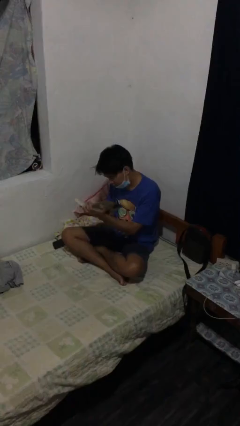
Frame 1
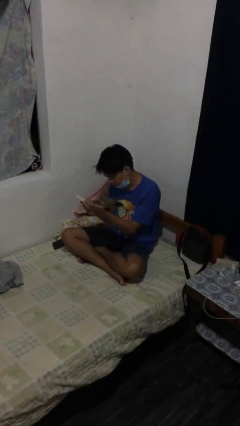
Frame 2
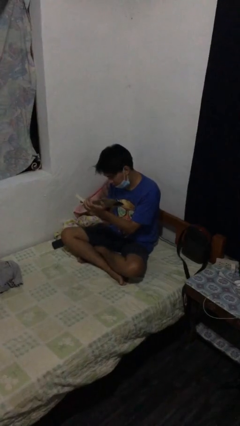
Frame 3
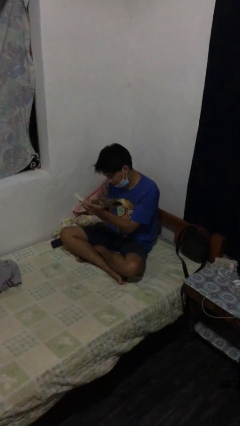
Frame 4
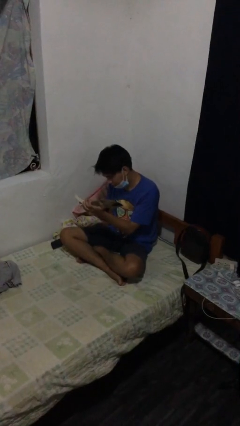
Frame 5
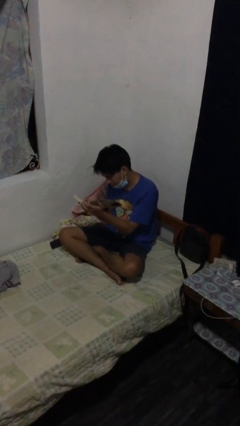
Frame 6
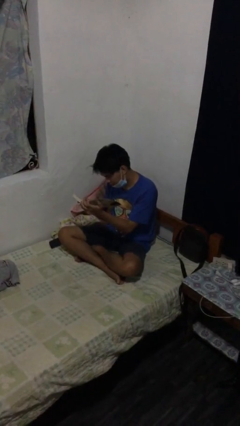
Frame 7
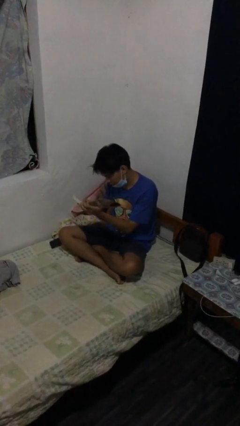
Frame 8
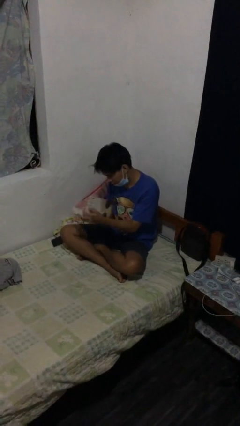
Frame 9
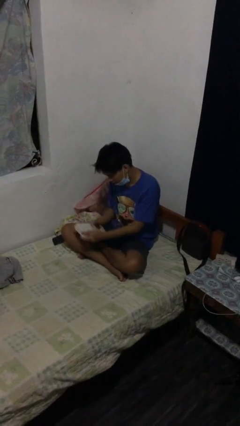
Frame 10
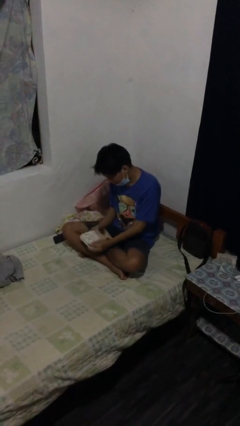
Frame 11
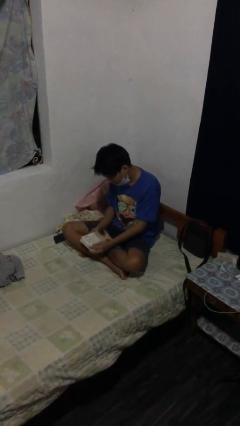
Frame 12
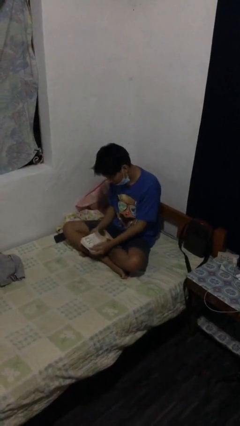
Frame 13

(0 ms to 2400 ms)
person reads document

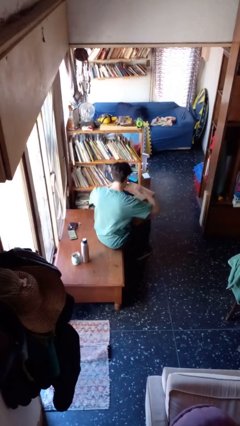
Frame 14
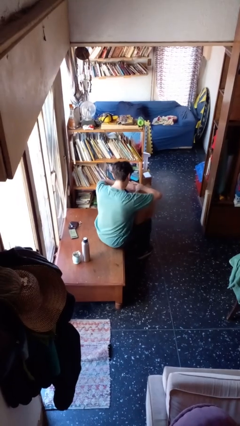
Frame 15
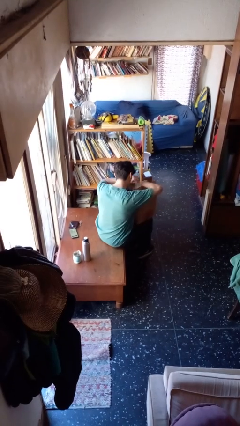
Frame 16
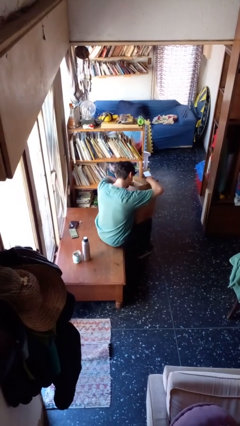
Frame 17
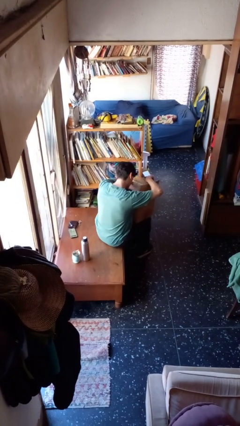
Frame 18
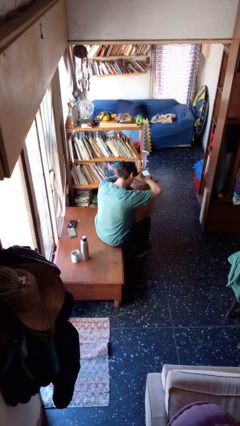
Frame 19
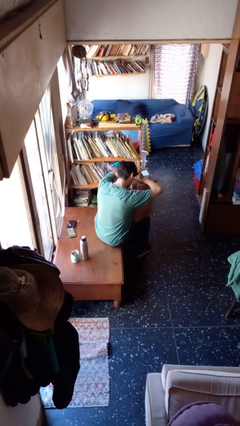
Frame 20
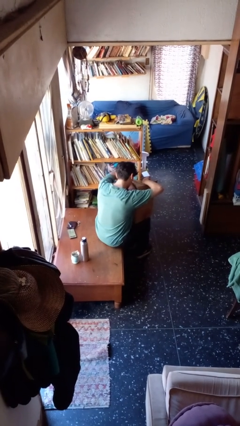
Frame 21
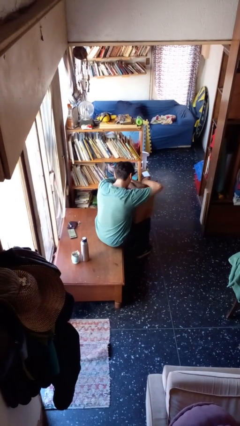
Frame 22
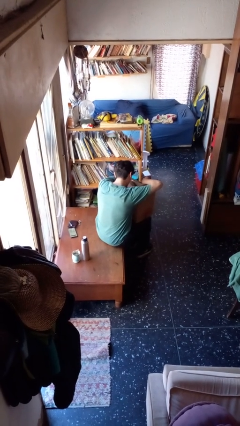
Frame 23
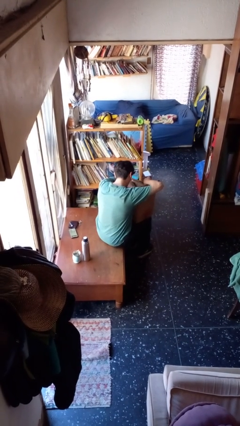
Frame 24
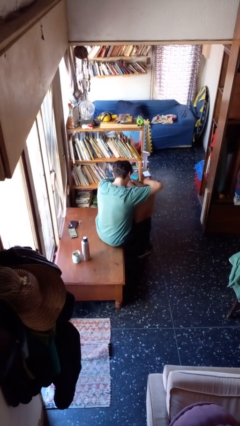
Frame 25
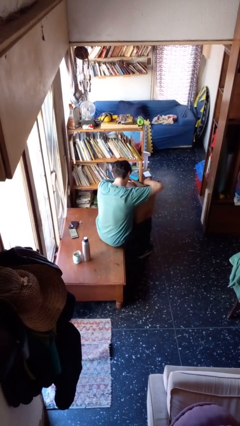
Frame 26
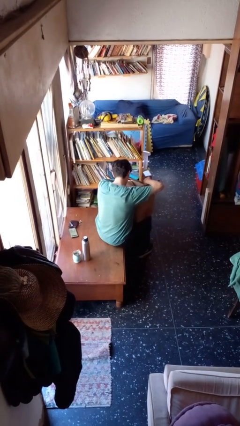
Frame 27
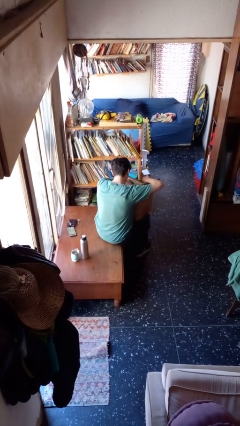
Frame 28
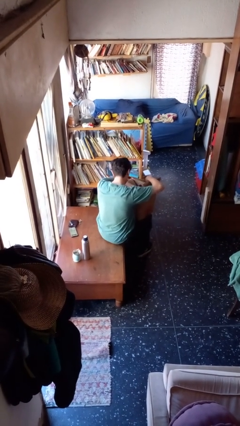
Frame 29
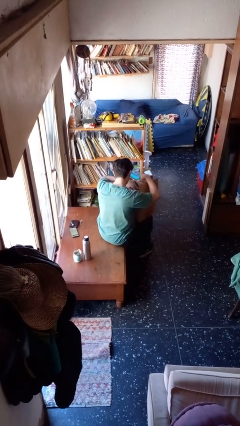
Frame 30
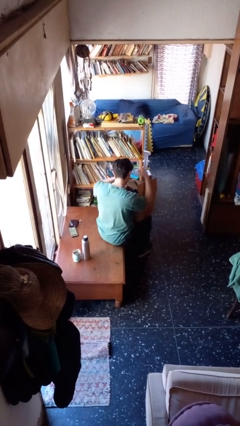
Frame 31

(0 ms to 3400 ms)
person searches in box

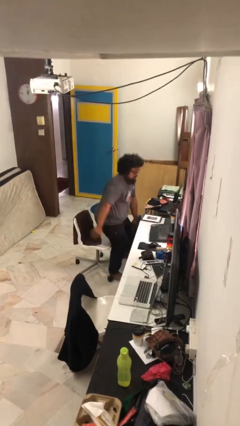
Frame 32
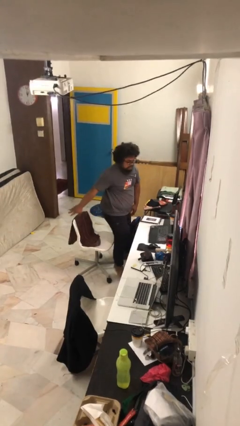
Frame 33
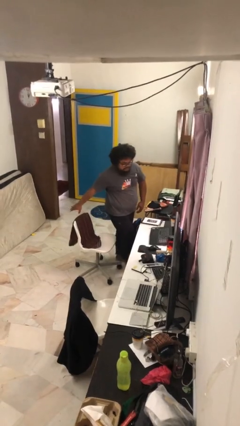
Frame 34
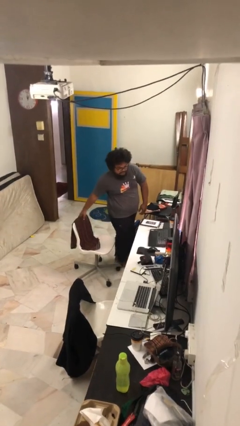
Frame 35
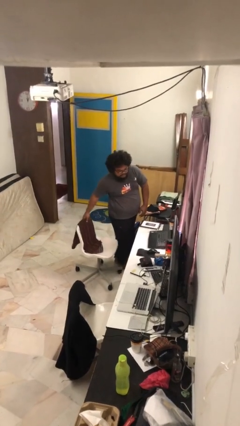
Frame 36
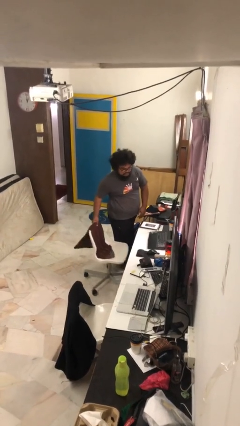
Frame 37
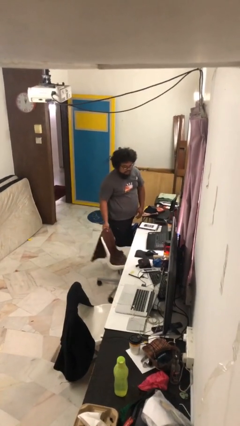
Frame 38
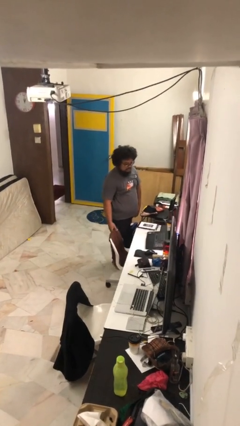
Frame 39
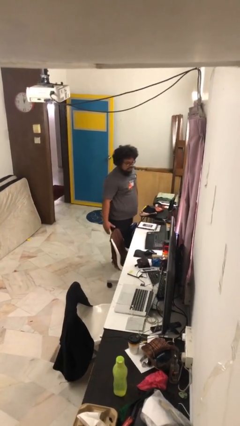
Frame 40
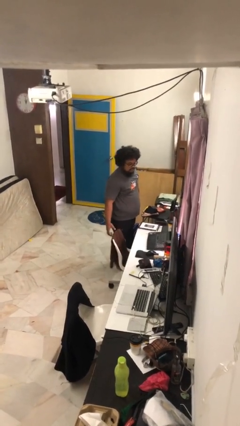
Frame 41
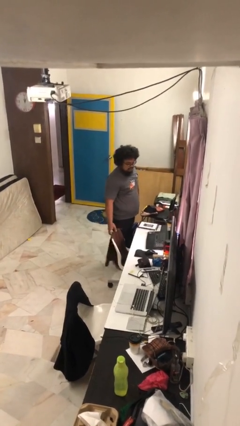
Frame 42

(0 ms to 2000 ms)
person stands up

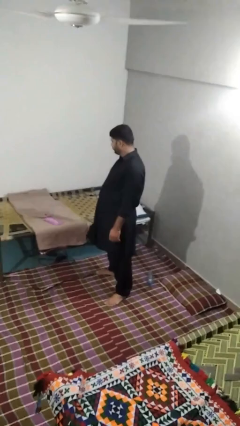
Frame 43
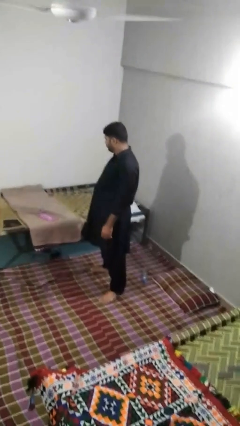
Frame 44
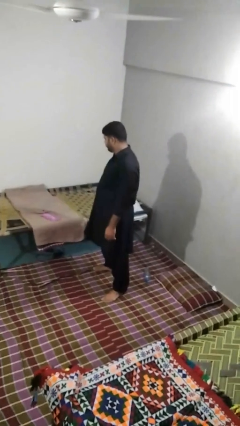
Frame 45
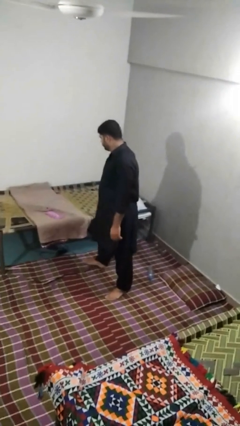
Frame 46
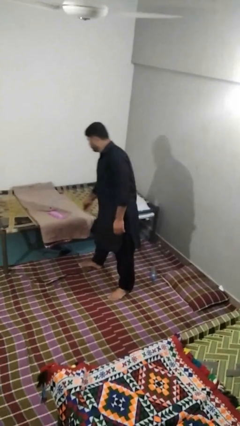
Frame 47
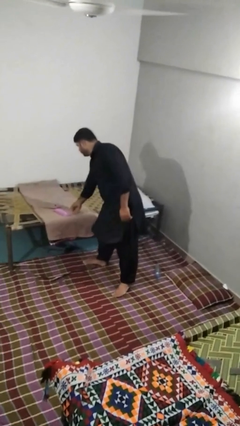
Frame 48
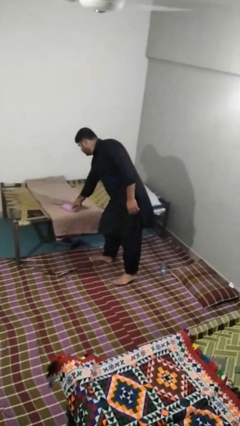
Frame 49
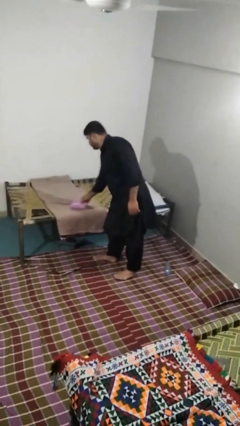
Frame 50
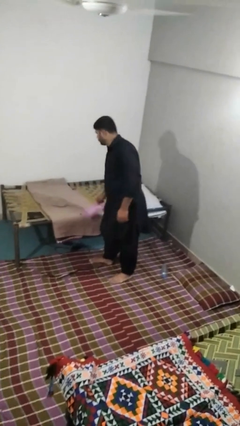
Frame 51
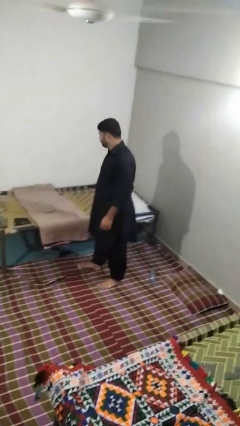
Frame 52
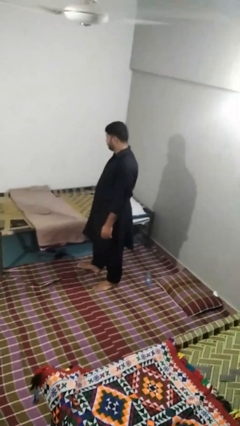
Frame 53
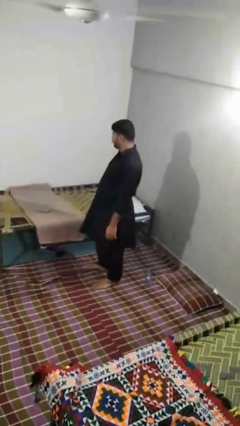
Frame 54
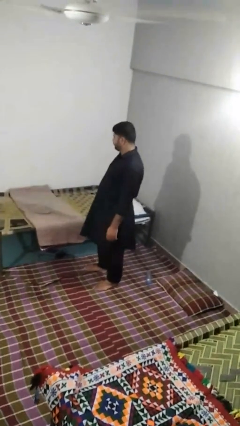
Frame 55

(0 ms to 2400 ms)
person picks up object from bed

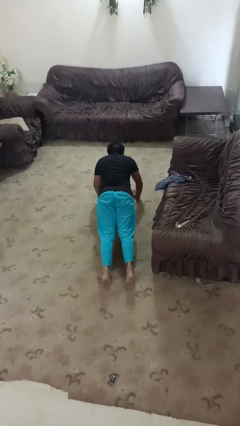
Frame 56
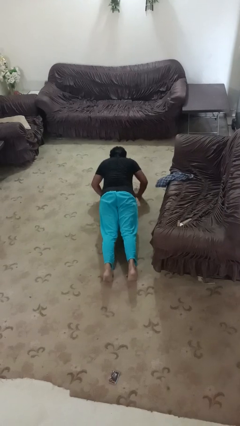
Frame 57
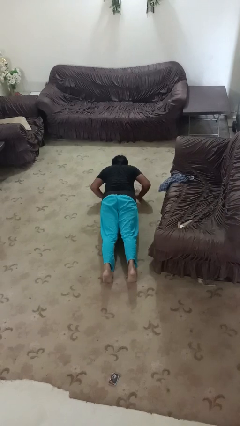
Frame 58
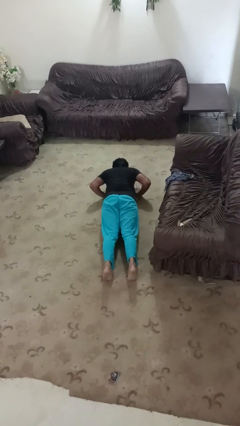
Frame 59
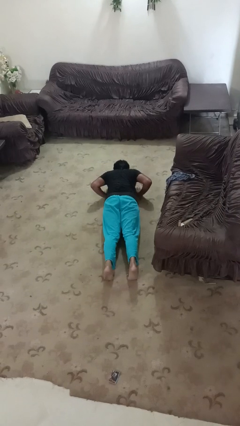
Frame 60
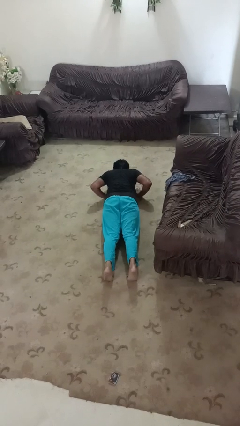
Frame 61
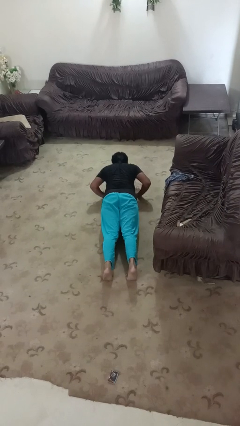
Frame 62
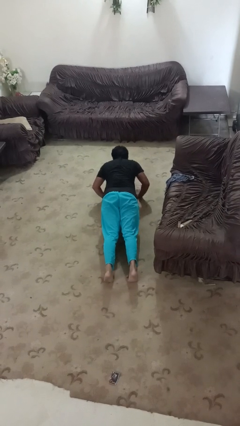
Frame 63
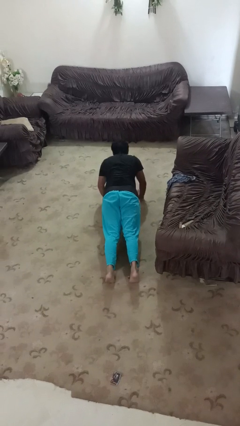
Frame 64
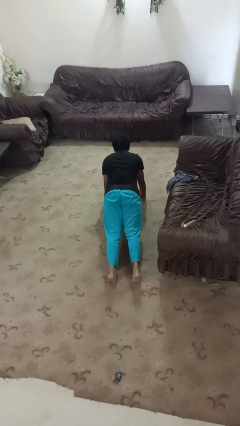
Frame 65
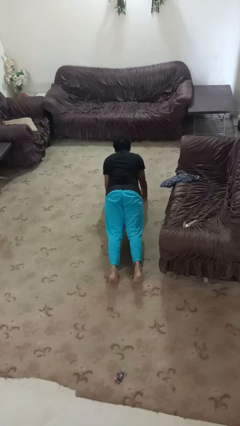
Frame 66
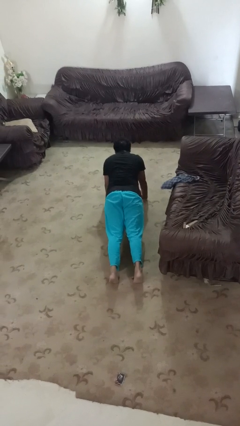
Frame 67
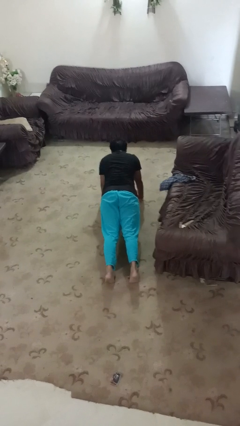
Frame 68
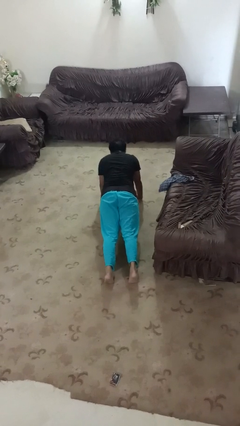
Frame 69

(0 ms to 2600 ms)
person exercises with pushup

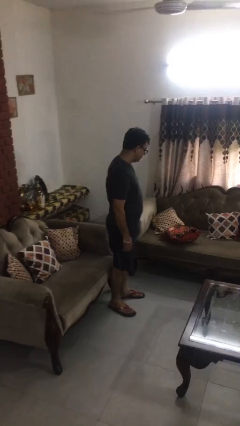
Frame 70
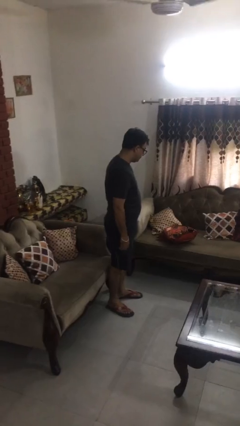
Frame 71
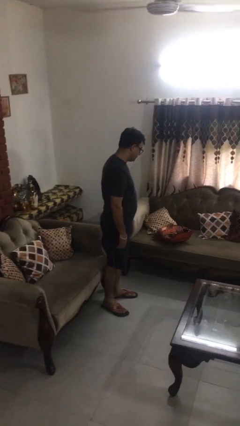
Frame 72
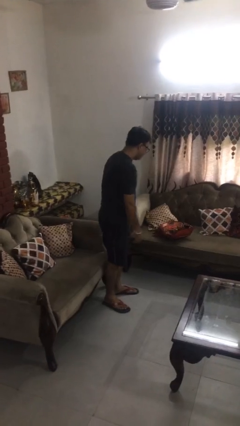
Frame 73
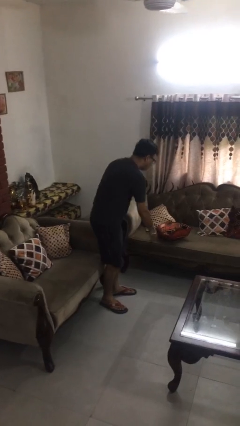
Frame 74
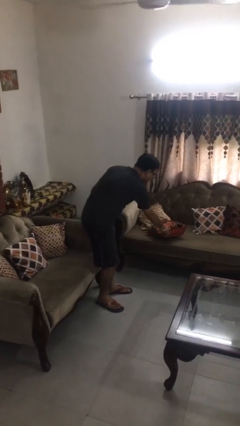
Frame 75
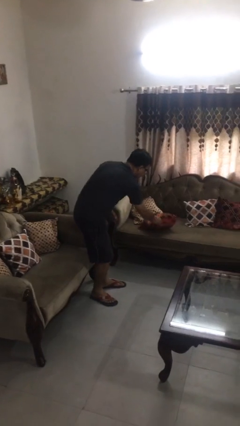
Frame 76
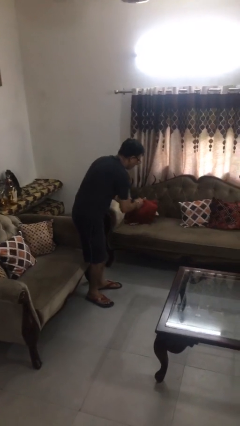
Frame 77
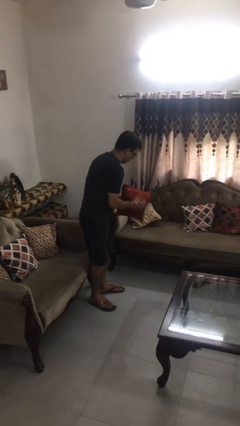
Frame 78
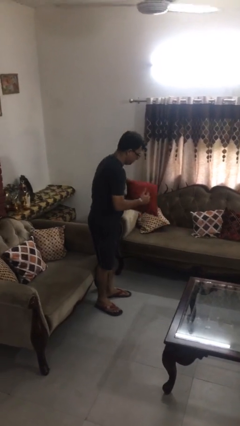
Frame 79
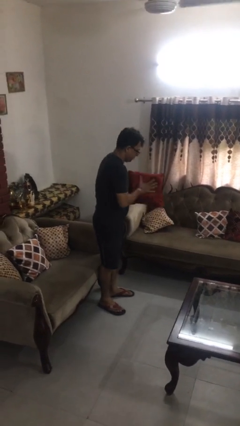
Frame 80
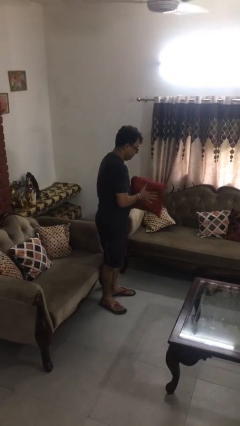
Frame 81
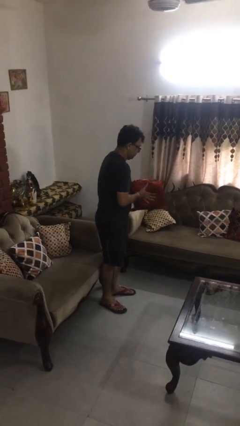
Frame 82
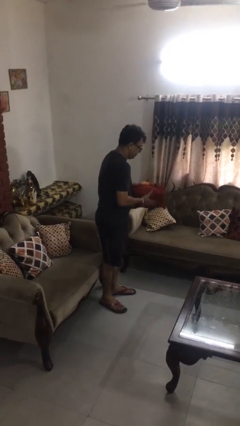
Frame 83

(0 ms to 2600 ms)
person picks up object from couch

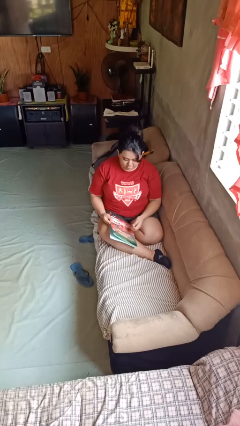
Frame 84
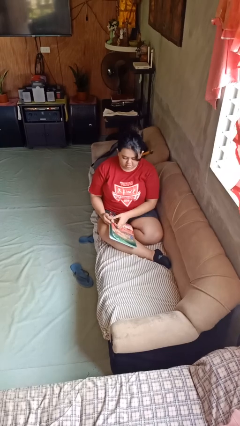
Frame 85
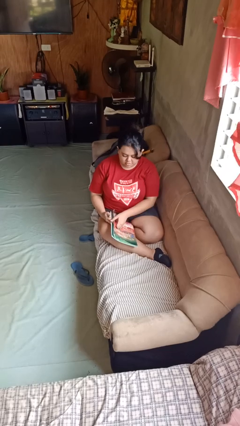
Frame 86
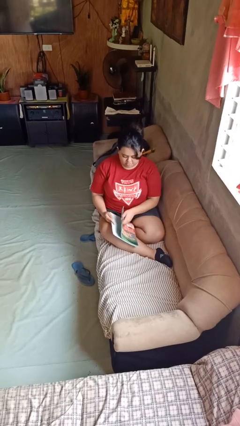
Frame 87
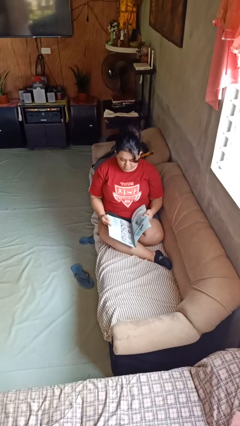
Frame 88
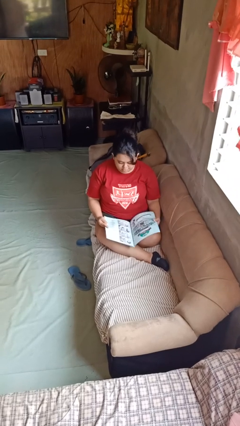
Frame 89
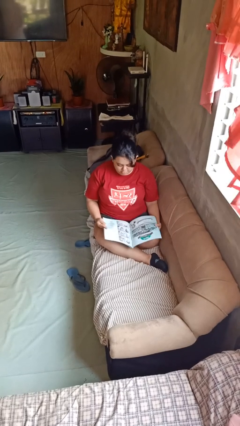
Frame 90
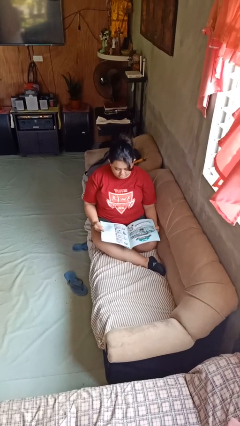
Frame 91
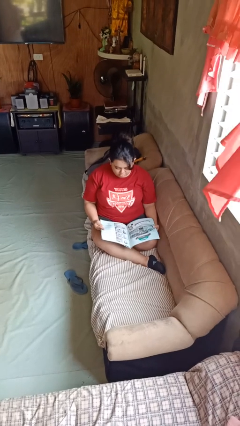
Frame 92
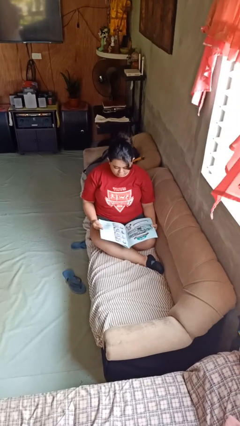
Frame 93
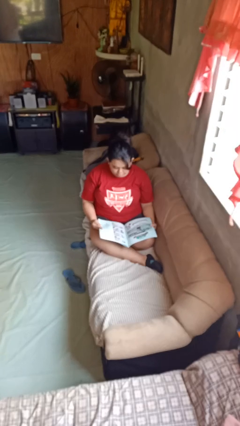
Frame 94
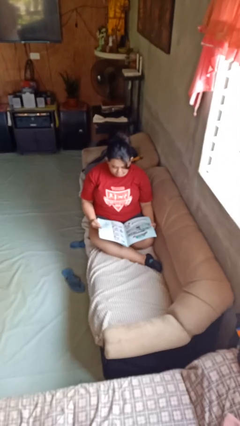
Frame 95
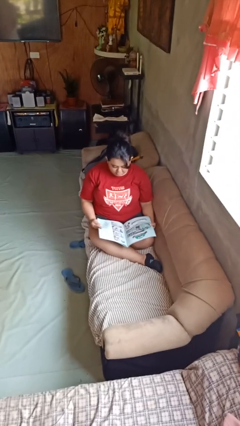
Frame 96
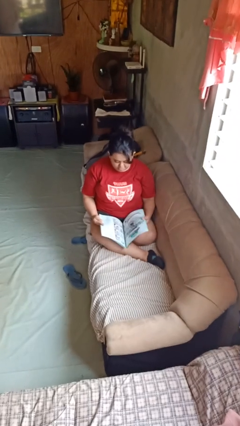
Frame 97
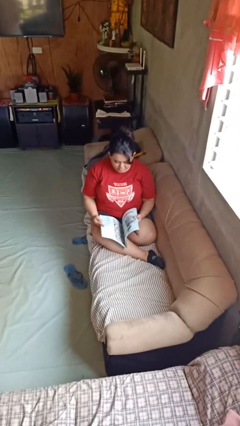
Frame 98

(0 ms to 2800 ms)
person reads magazine
